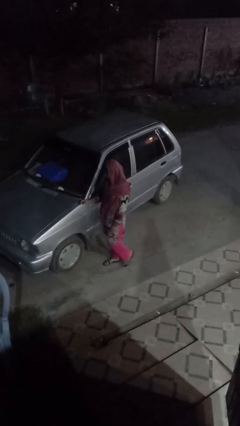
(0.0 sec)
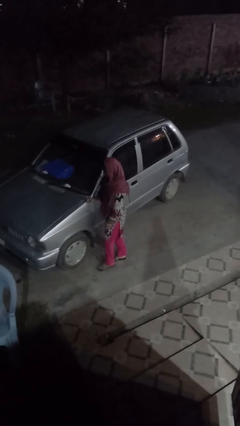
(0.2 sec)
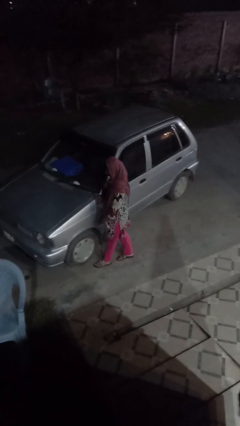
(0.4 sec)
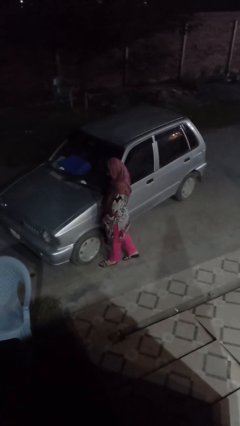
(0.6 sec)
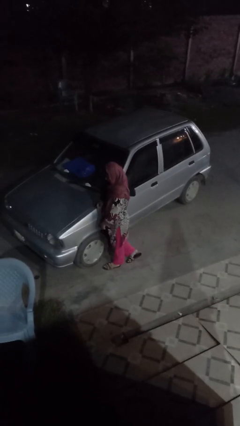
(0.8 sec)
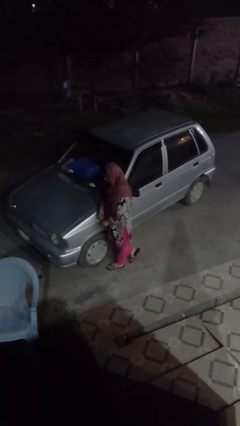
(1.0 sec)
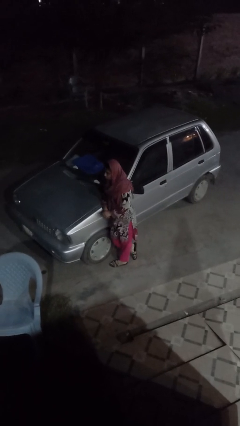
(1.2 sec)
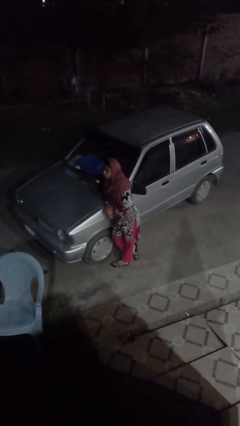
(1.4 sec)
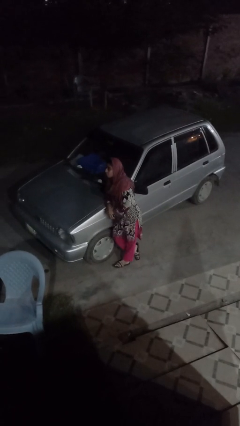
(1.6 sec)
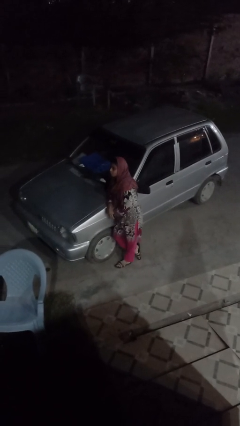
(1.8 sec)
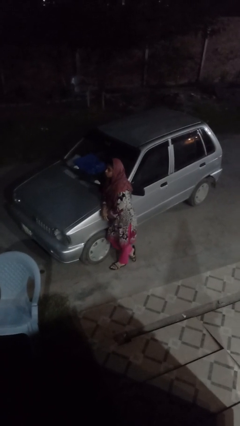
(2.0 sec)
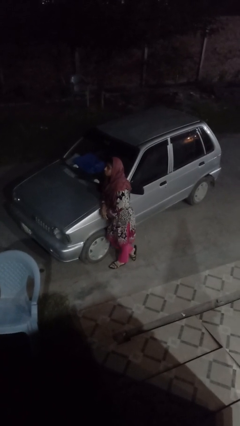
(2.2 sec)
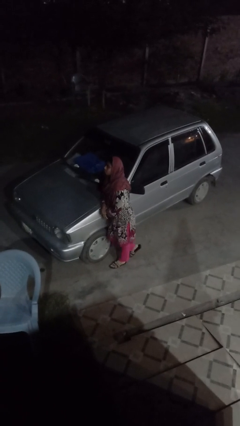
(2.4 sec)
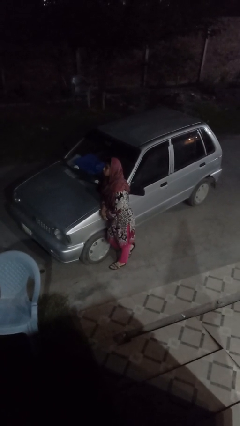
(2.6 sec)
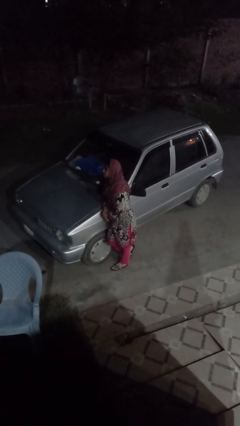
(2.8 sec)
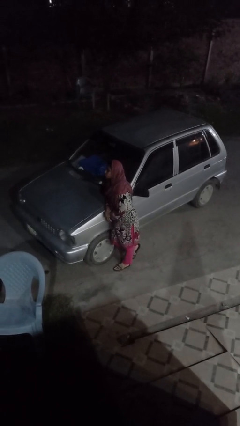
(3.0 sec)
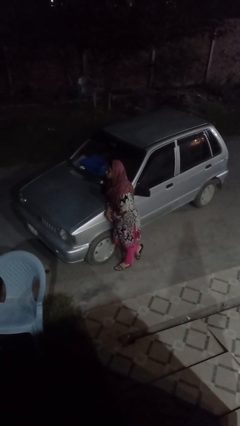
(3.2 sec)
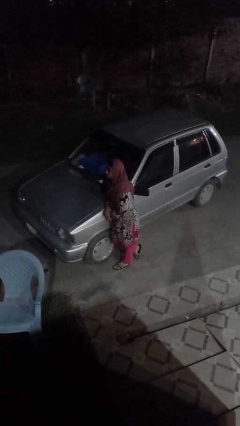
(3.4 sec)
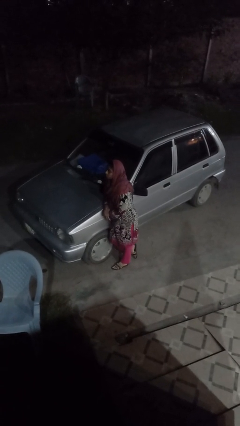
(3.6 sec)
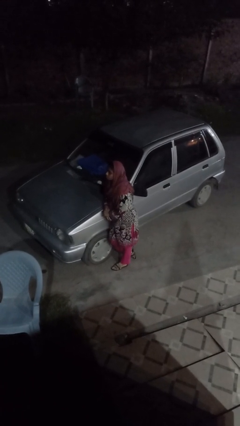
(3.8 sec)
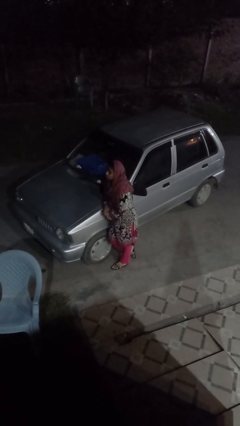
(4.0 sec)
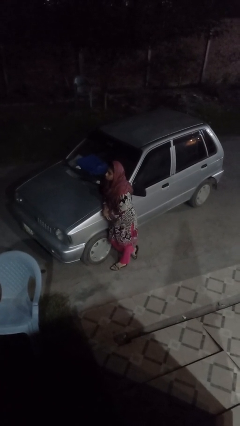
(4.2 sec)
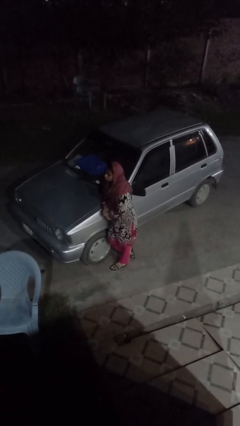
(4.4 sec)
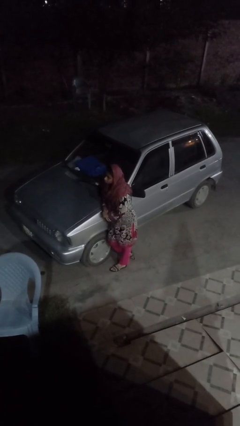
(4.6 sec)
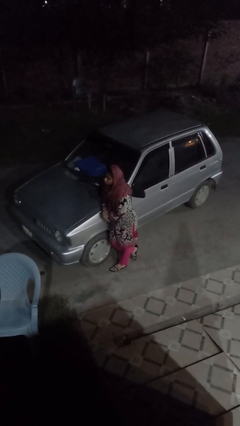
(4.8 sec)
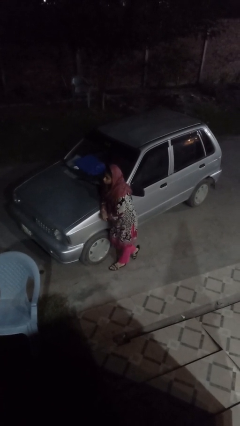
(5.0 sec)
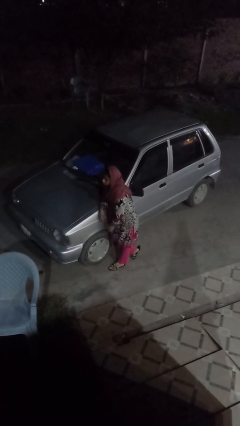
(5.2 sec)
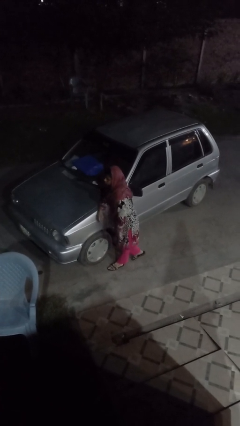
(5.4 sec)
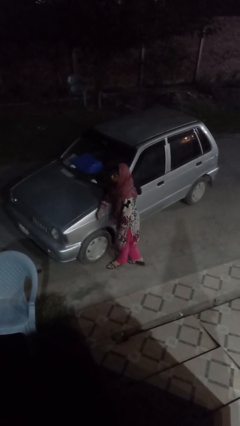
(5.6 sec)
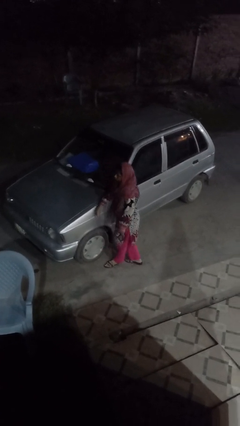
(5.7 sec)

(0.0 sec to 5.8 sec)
person leans against car

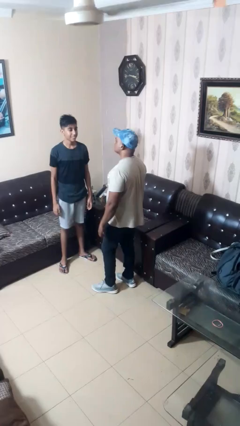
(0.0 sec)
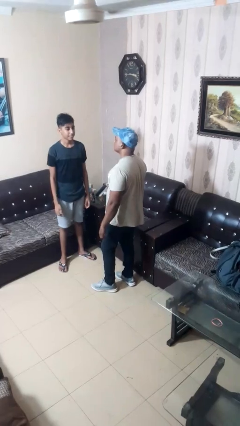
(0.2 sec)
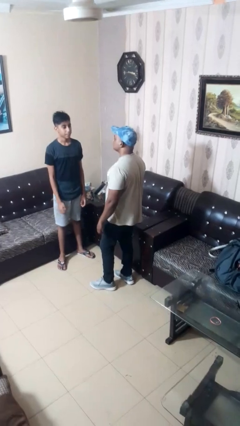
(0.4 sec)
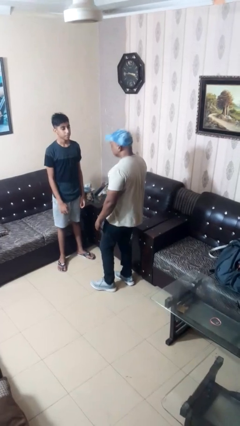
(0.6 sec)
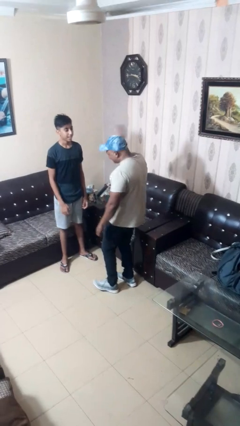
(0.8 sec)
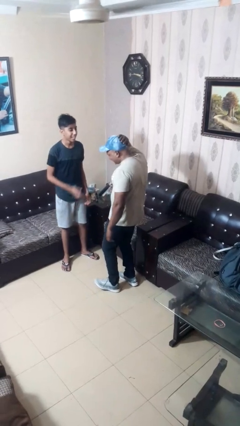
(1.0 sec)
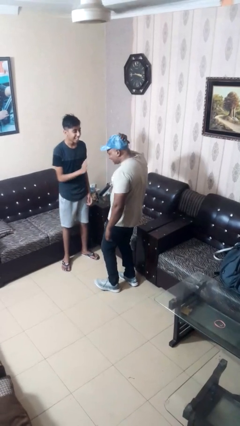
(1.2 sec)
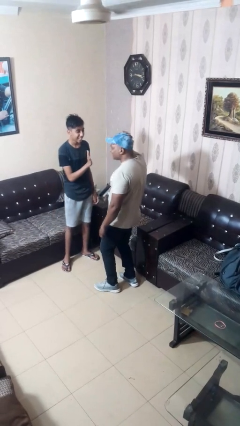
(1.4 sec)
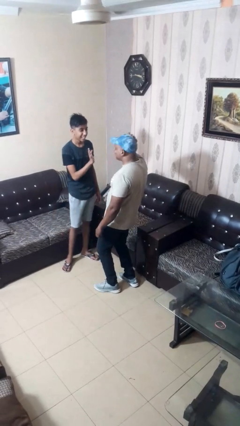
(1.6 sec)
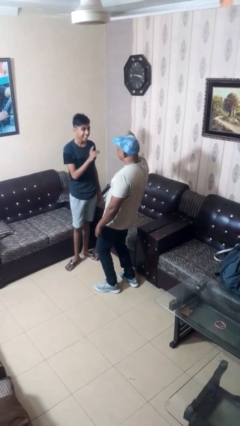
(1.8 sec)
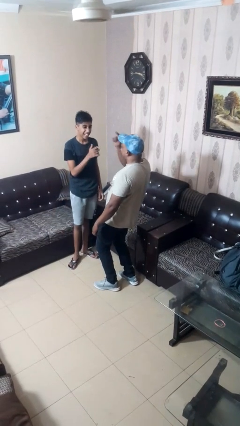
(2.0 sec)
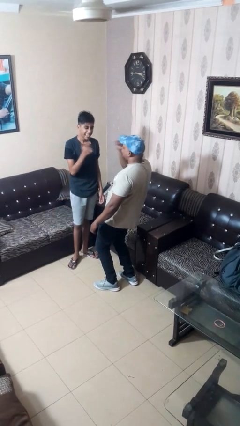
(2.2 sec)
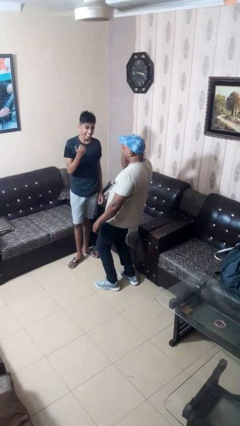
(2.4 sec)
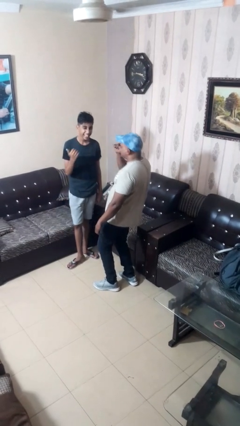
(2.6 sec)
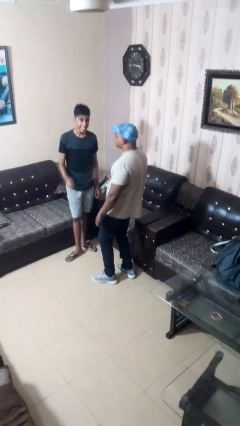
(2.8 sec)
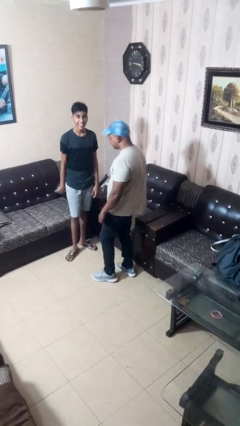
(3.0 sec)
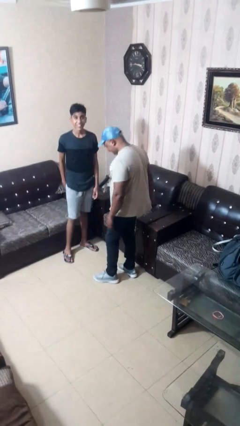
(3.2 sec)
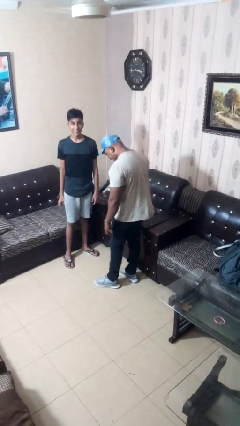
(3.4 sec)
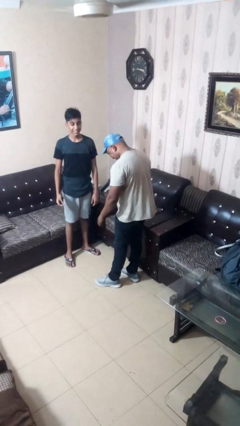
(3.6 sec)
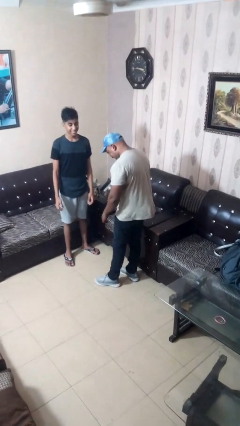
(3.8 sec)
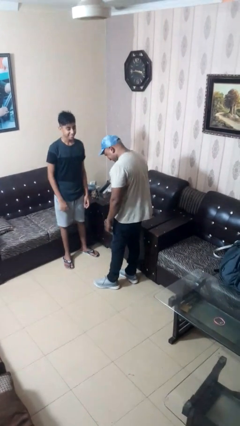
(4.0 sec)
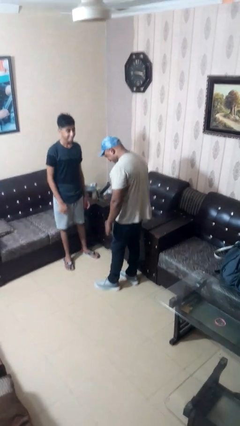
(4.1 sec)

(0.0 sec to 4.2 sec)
person laughs with person

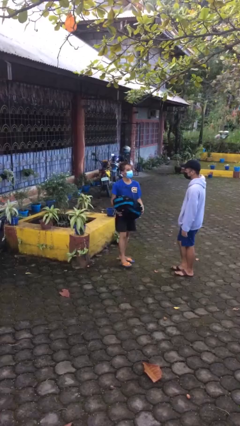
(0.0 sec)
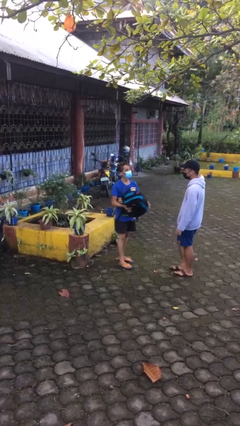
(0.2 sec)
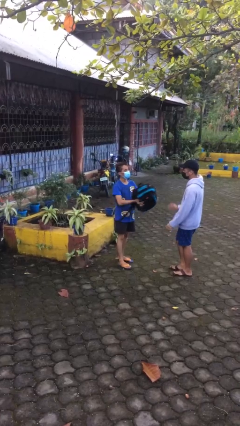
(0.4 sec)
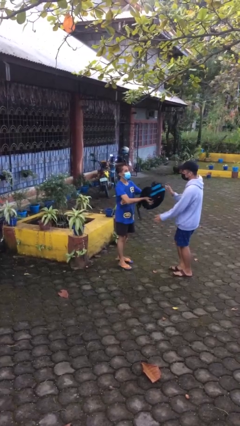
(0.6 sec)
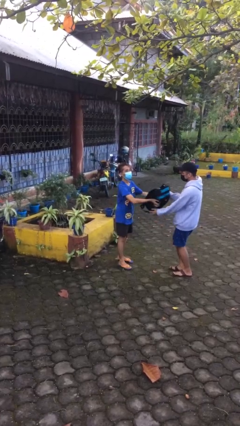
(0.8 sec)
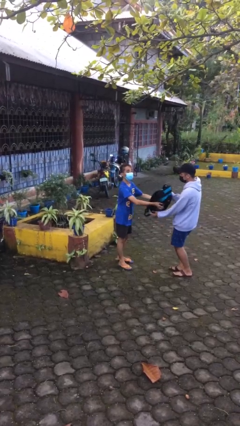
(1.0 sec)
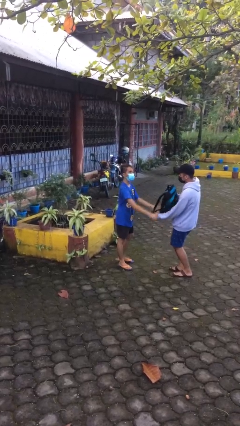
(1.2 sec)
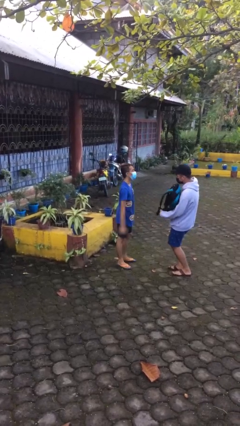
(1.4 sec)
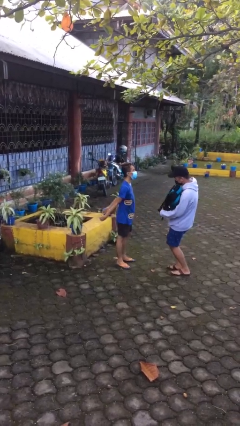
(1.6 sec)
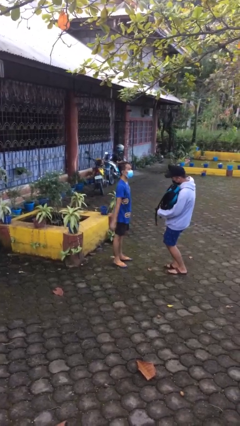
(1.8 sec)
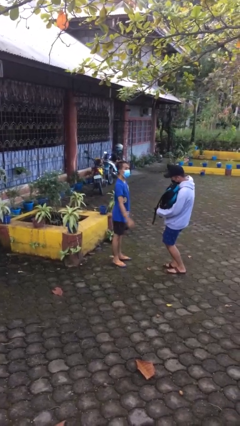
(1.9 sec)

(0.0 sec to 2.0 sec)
person transfers object to person

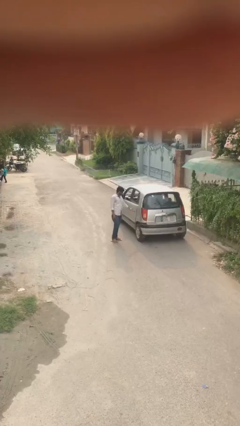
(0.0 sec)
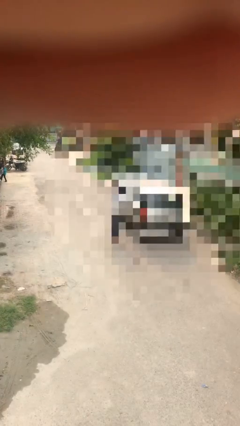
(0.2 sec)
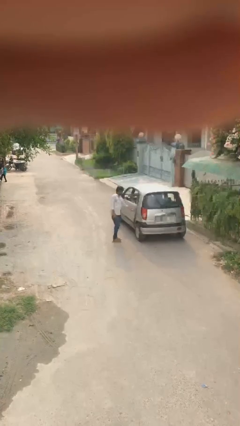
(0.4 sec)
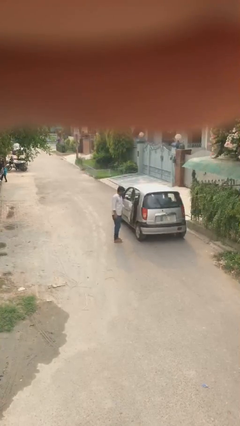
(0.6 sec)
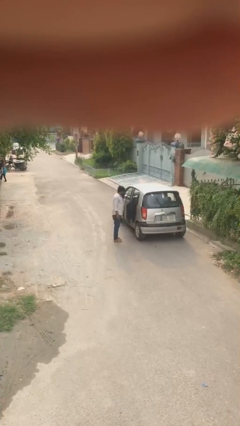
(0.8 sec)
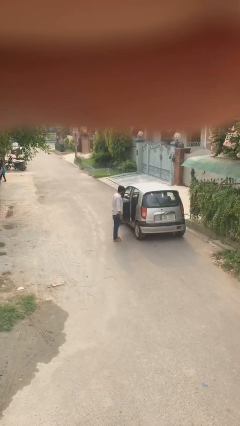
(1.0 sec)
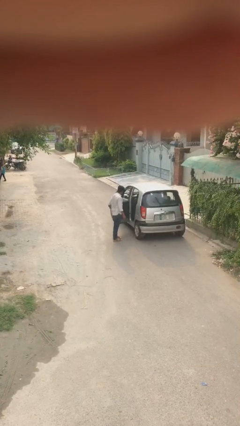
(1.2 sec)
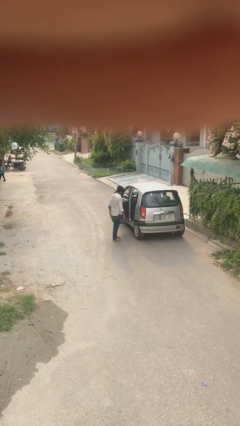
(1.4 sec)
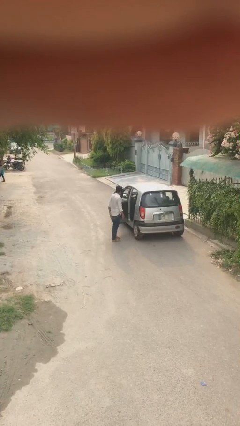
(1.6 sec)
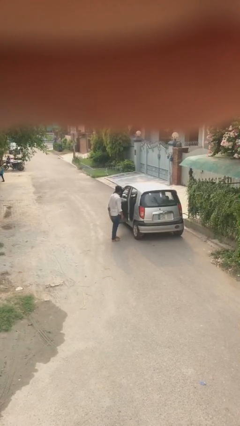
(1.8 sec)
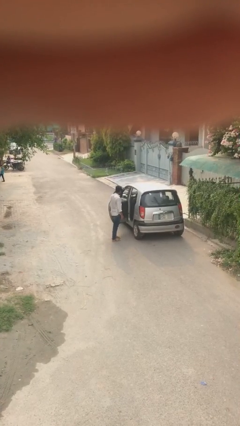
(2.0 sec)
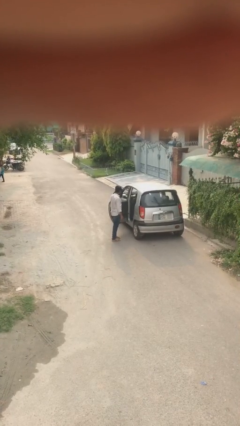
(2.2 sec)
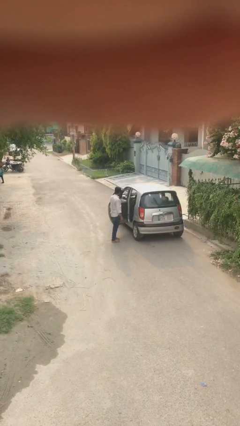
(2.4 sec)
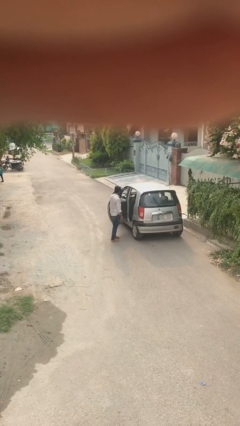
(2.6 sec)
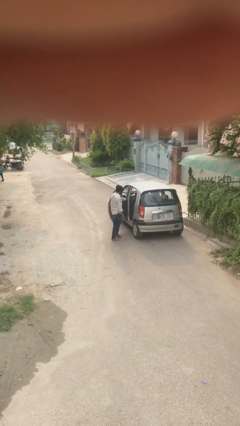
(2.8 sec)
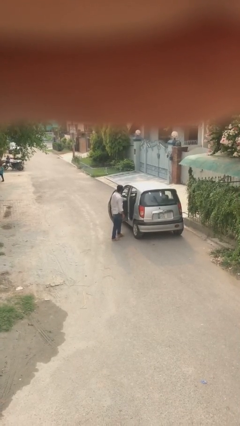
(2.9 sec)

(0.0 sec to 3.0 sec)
person opens car door

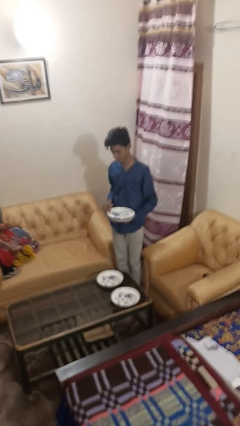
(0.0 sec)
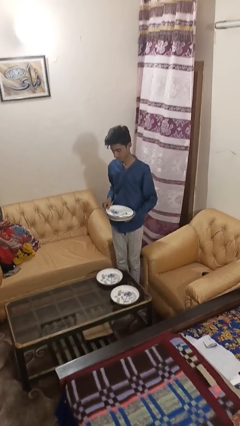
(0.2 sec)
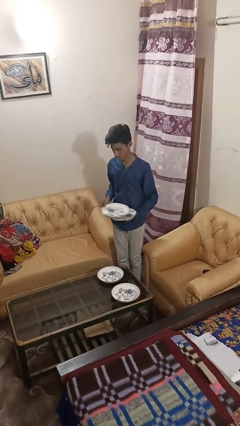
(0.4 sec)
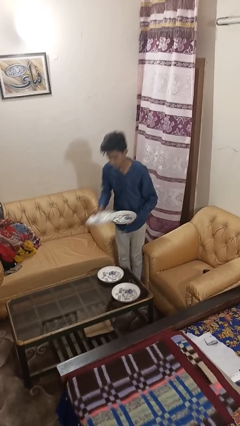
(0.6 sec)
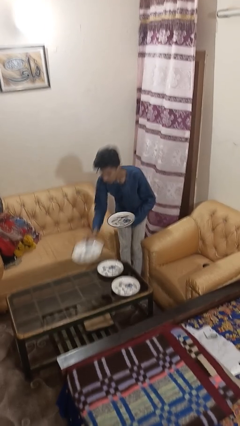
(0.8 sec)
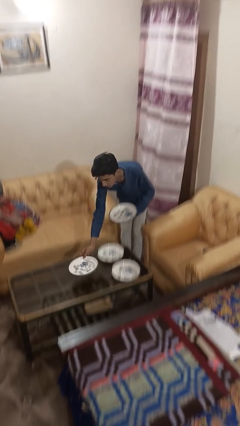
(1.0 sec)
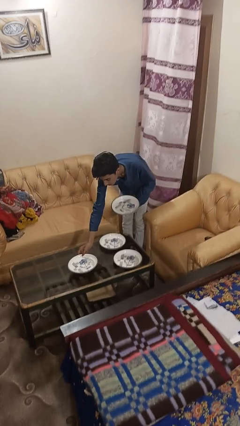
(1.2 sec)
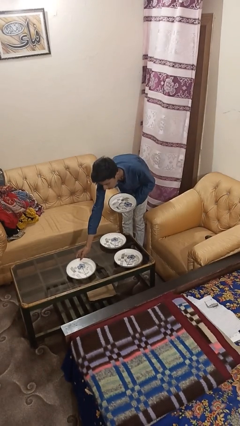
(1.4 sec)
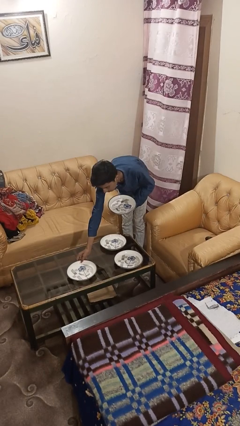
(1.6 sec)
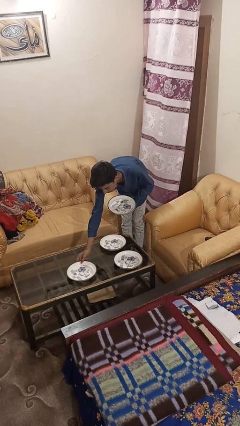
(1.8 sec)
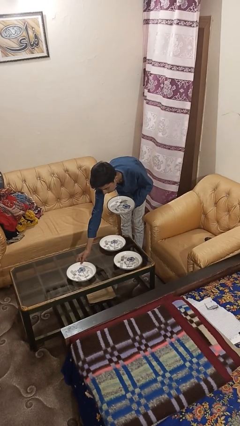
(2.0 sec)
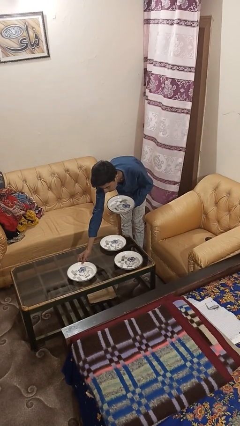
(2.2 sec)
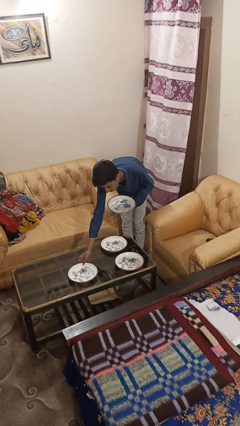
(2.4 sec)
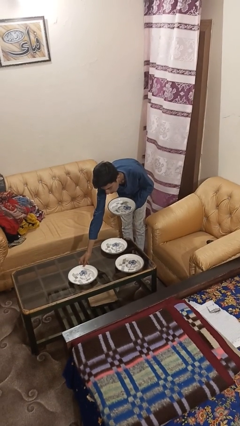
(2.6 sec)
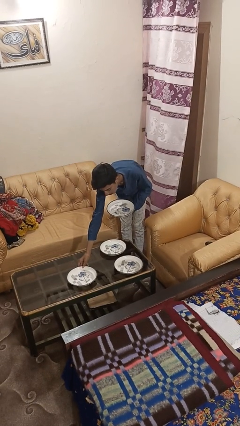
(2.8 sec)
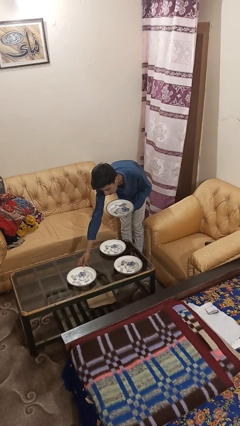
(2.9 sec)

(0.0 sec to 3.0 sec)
person sets table
